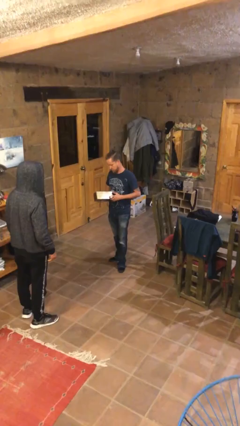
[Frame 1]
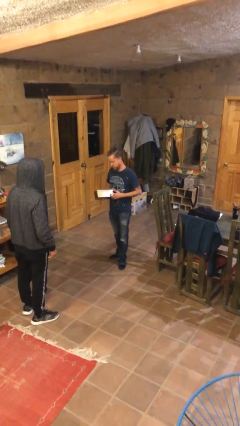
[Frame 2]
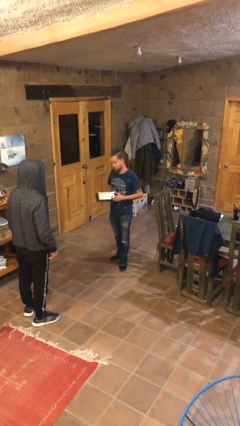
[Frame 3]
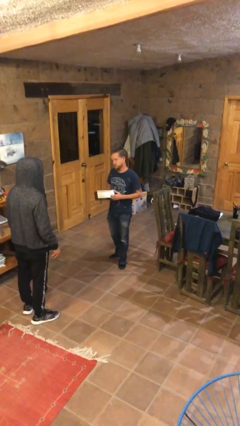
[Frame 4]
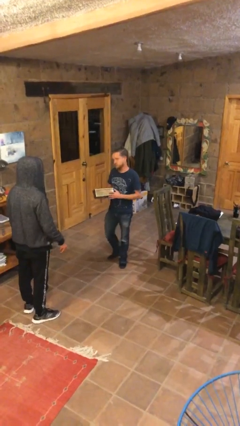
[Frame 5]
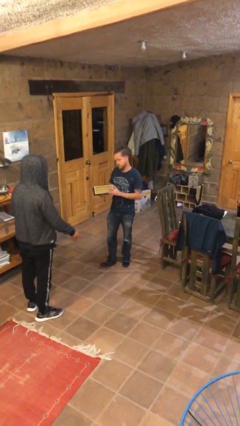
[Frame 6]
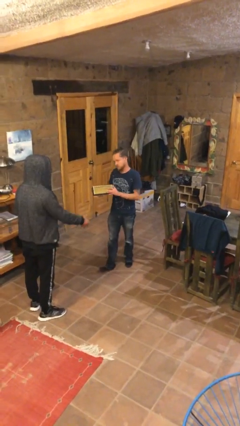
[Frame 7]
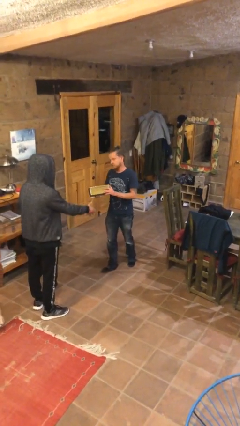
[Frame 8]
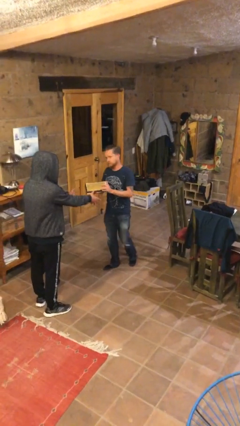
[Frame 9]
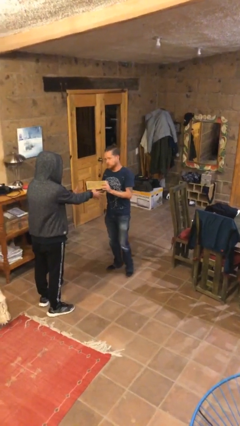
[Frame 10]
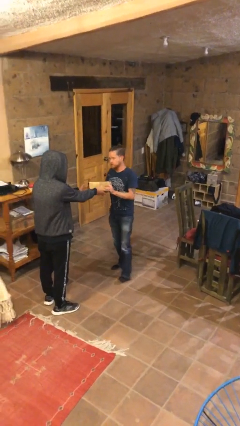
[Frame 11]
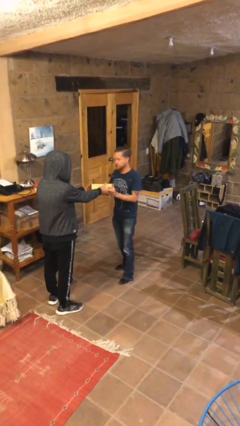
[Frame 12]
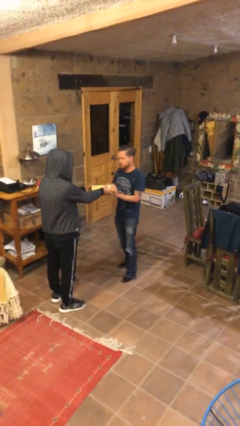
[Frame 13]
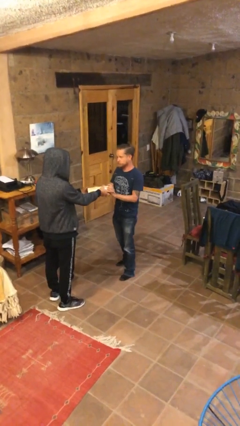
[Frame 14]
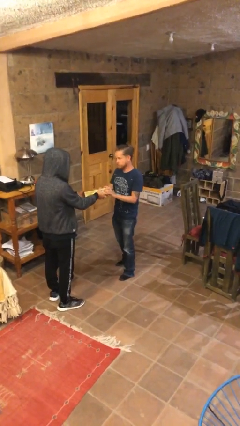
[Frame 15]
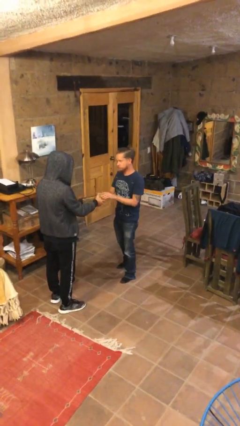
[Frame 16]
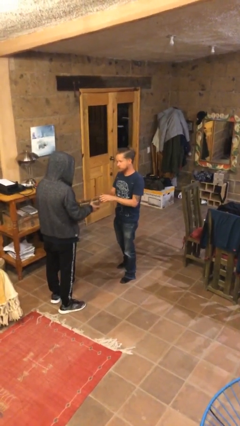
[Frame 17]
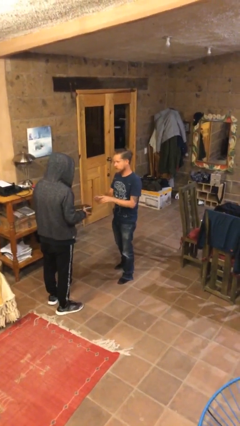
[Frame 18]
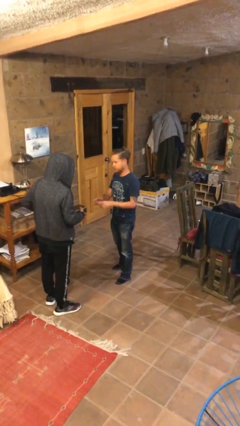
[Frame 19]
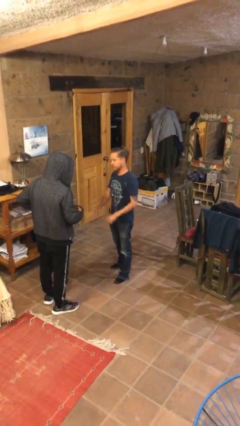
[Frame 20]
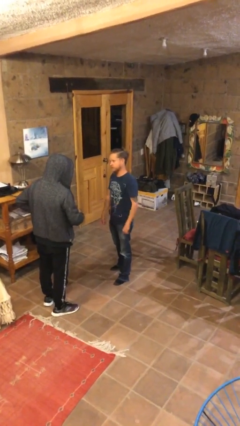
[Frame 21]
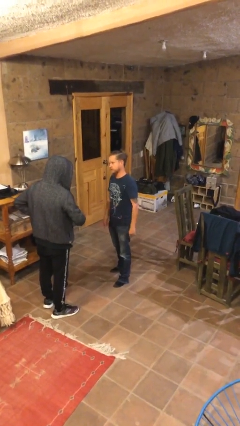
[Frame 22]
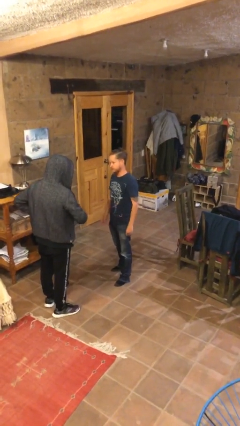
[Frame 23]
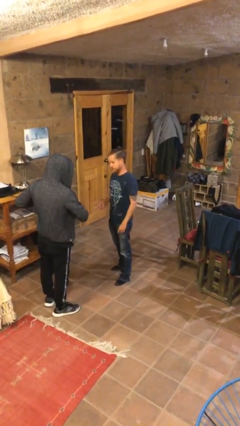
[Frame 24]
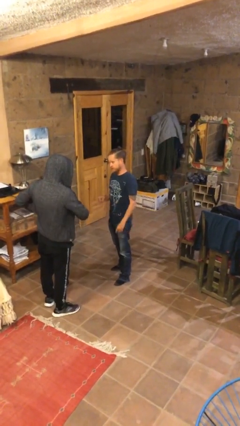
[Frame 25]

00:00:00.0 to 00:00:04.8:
person transfers object to person

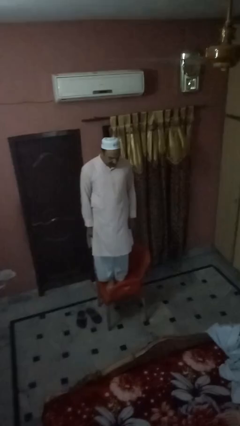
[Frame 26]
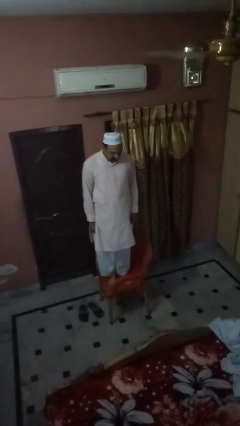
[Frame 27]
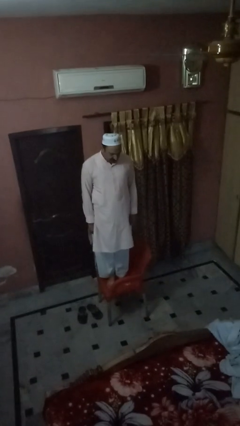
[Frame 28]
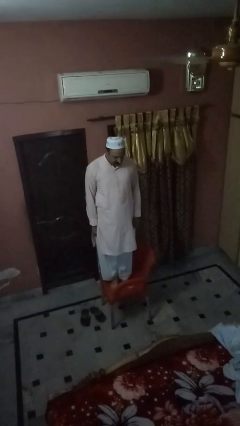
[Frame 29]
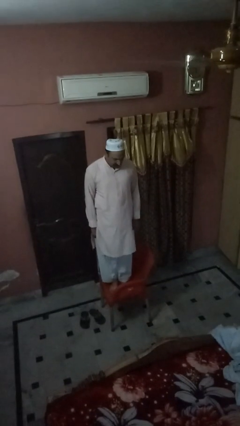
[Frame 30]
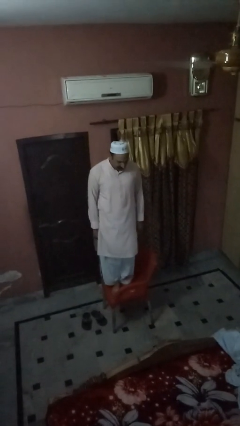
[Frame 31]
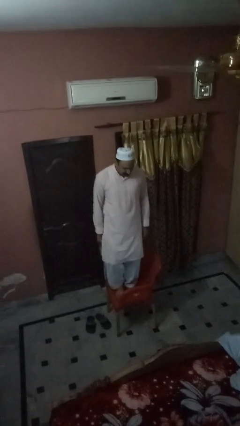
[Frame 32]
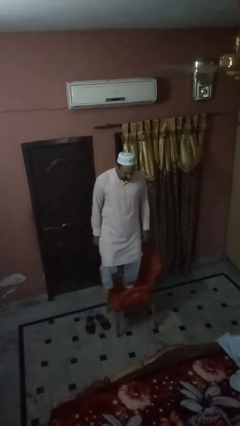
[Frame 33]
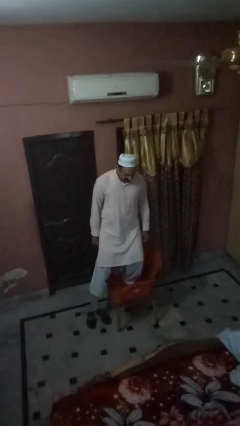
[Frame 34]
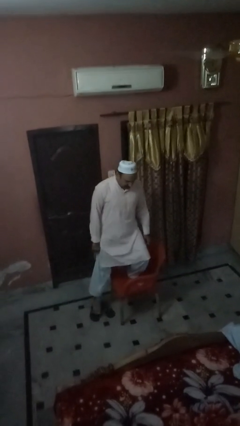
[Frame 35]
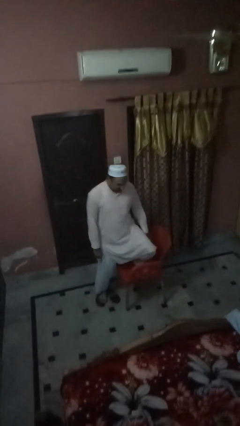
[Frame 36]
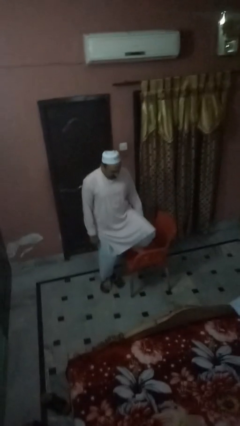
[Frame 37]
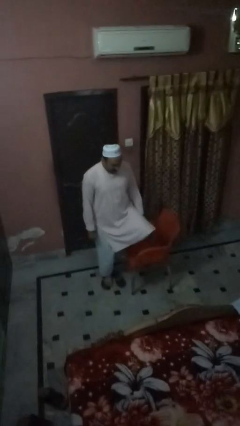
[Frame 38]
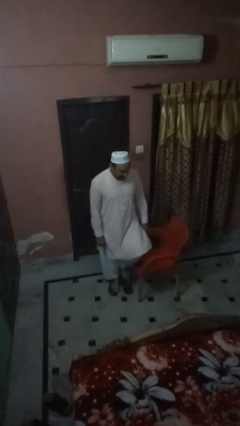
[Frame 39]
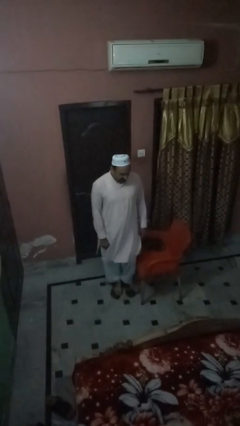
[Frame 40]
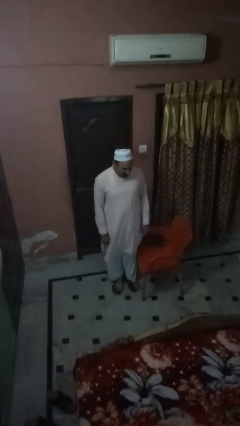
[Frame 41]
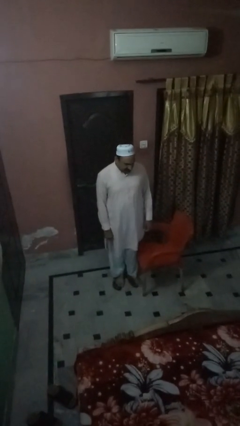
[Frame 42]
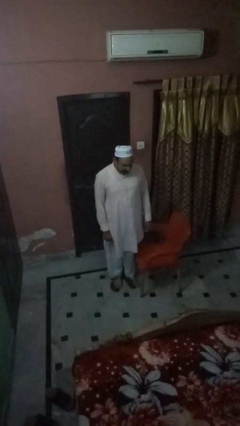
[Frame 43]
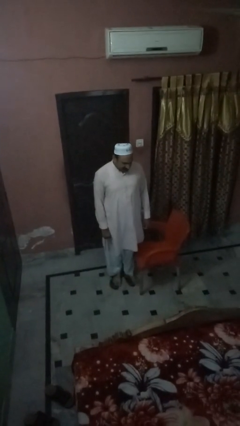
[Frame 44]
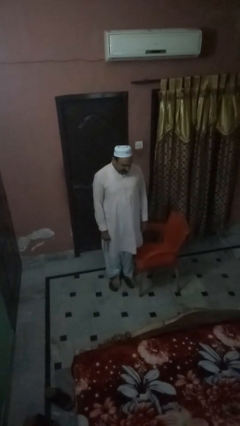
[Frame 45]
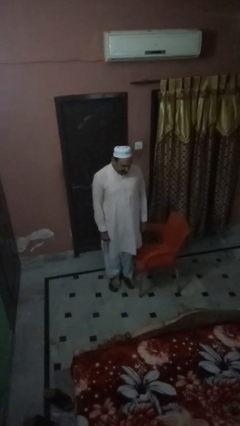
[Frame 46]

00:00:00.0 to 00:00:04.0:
person climbs off chair

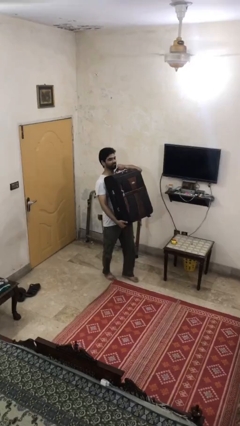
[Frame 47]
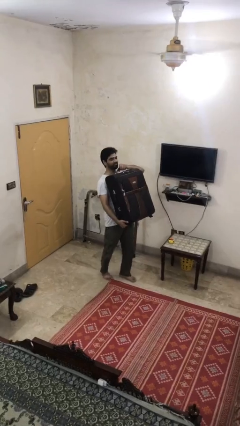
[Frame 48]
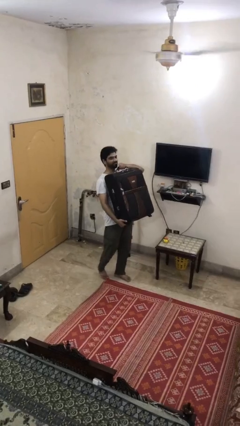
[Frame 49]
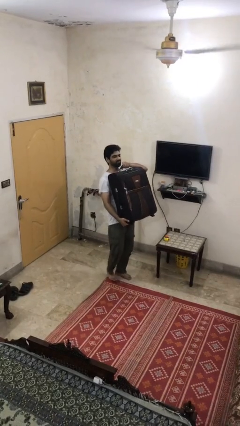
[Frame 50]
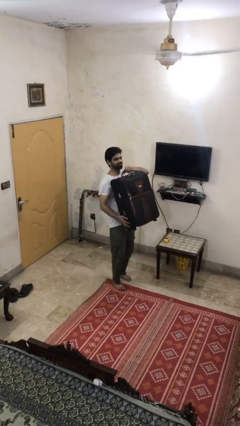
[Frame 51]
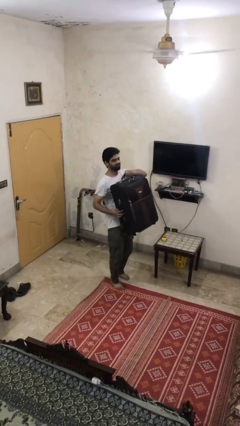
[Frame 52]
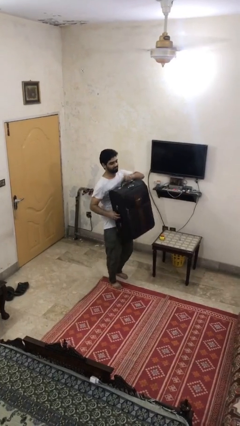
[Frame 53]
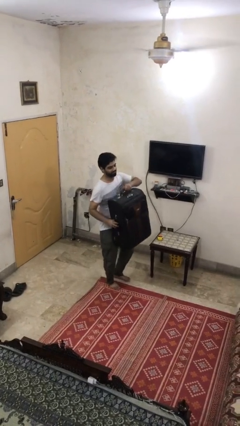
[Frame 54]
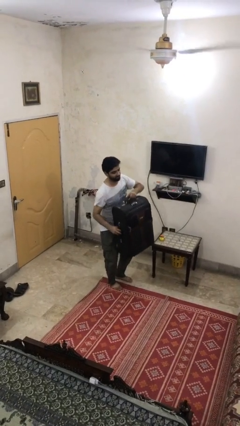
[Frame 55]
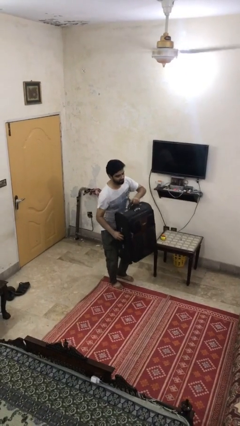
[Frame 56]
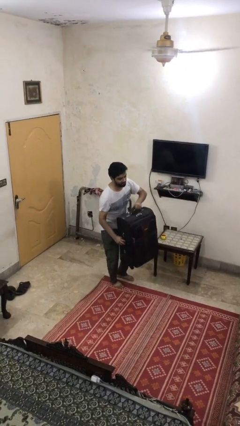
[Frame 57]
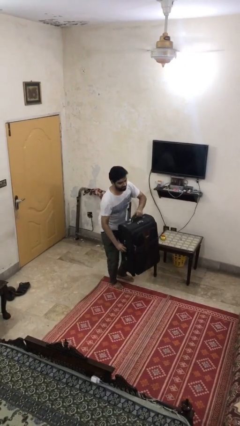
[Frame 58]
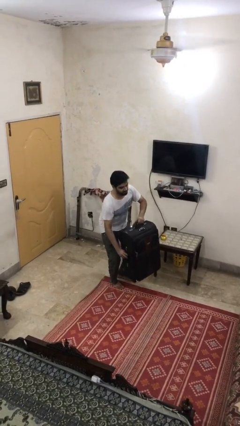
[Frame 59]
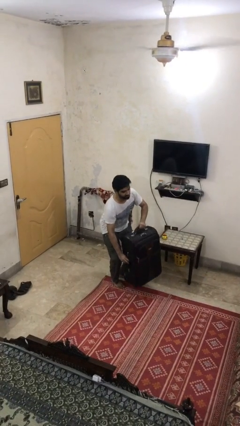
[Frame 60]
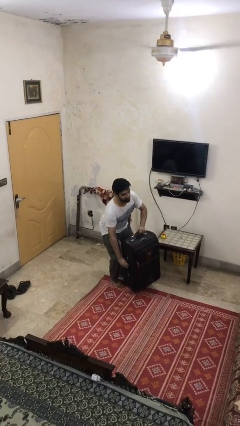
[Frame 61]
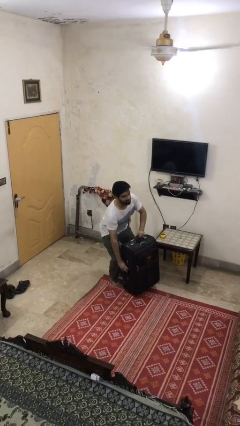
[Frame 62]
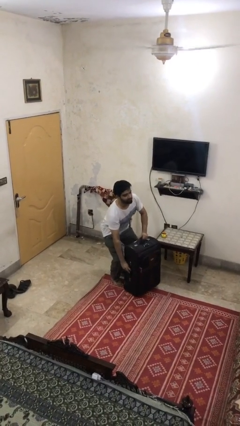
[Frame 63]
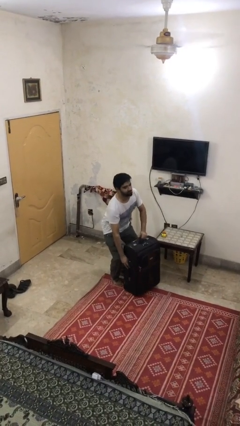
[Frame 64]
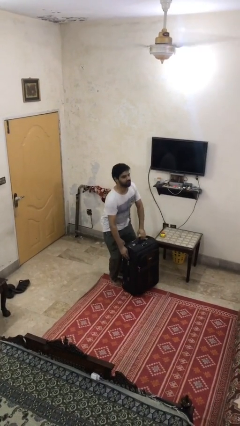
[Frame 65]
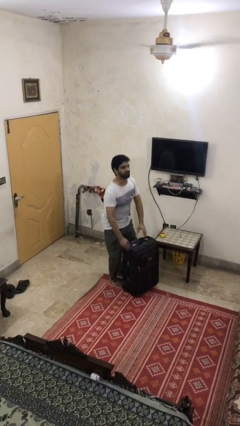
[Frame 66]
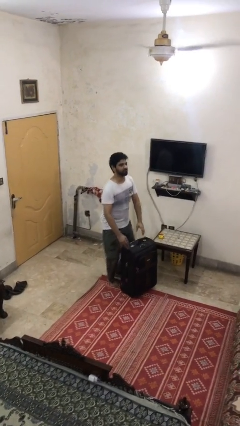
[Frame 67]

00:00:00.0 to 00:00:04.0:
person puts down object on floor

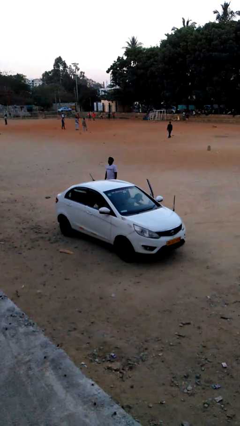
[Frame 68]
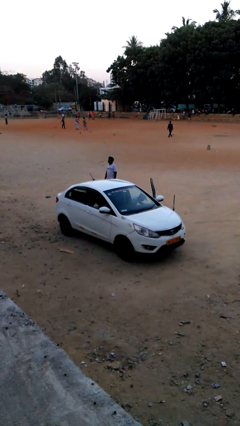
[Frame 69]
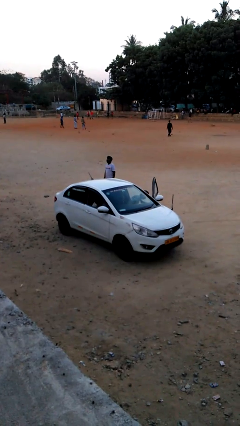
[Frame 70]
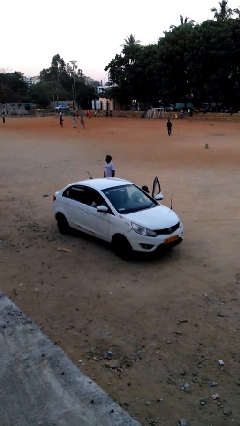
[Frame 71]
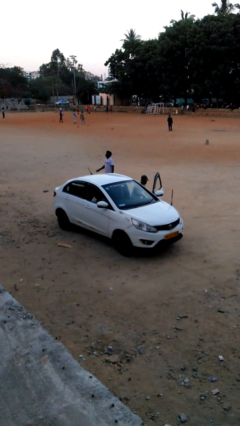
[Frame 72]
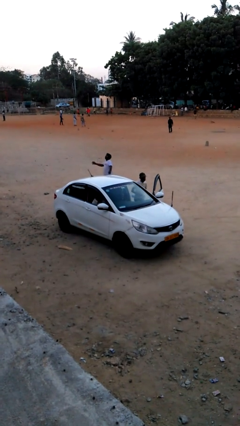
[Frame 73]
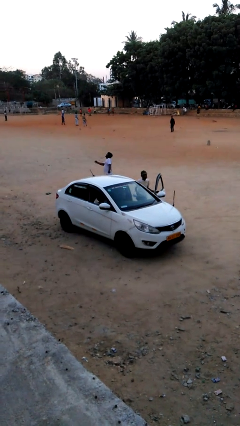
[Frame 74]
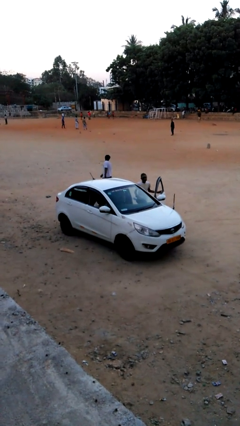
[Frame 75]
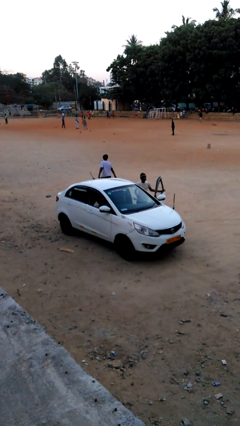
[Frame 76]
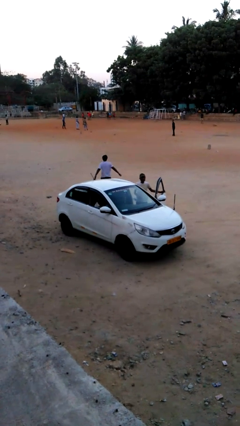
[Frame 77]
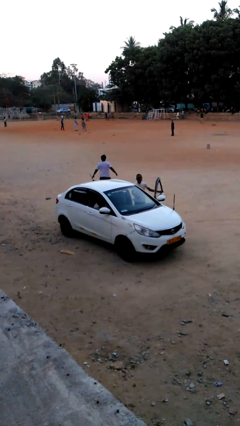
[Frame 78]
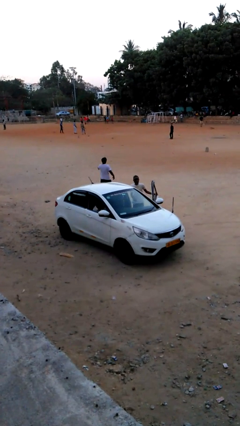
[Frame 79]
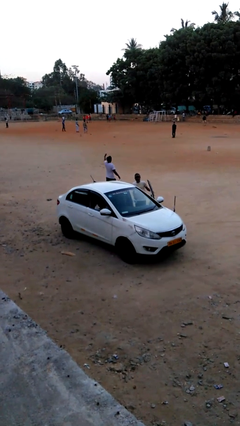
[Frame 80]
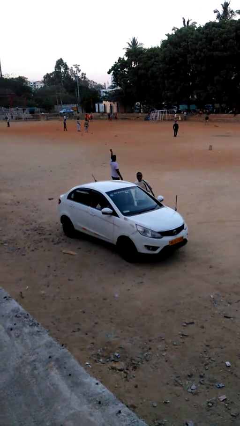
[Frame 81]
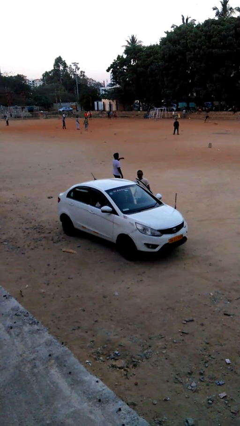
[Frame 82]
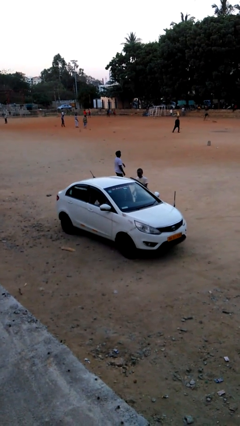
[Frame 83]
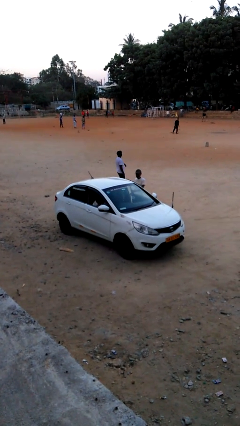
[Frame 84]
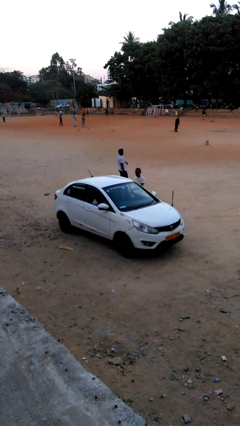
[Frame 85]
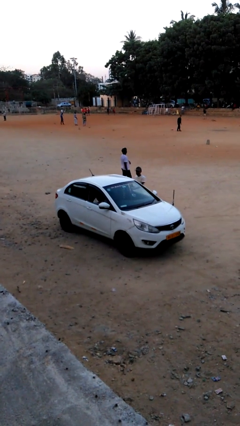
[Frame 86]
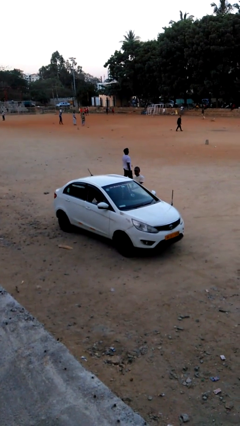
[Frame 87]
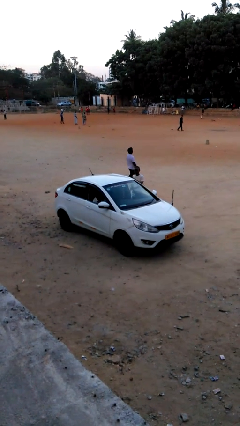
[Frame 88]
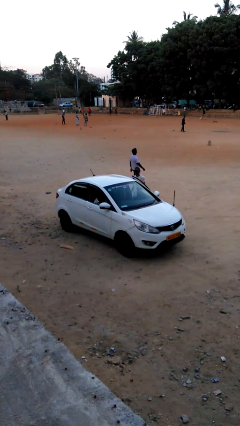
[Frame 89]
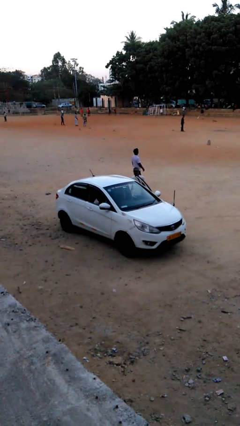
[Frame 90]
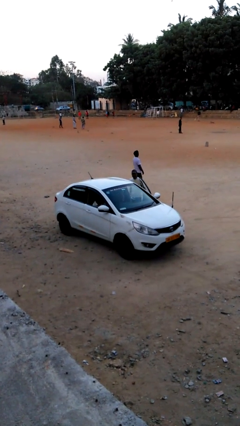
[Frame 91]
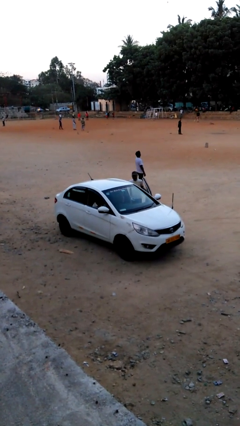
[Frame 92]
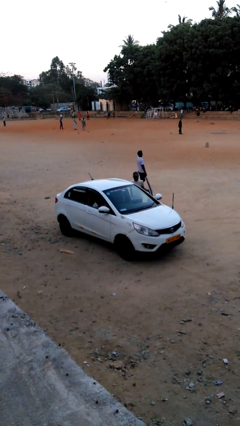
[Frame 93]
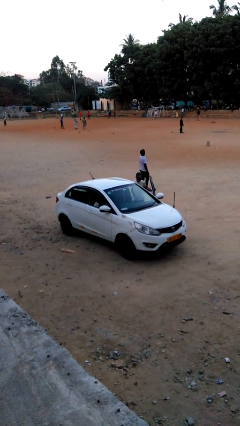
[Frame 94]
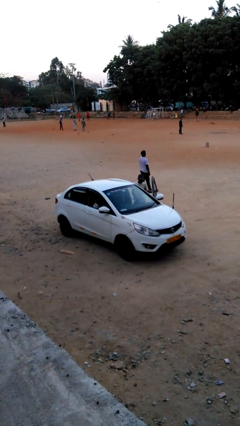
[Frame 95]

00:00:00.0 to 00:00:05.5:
car drops off person
